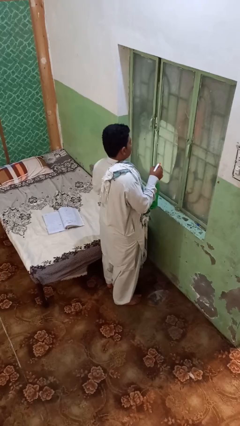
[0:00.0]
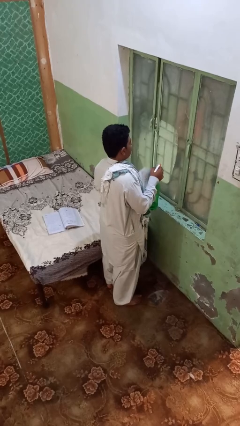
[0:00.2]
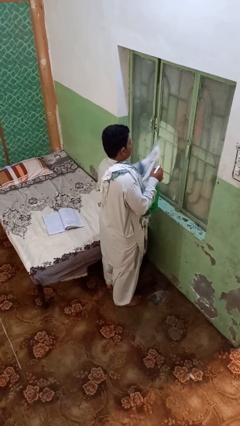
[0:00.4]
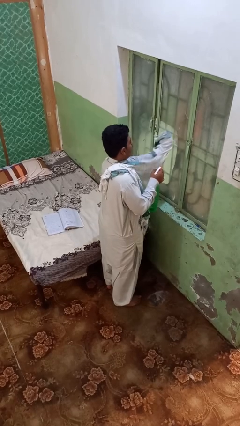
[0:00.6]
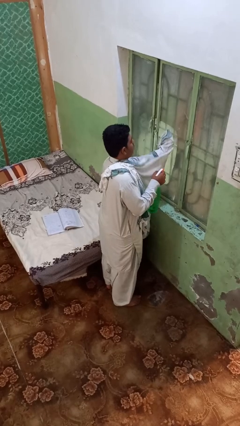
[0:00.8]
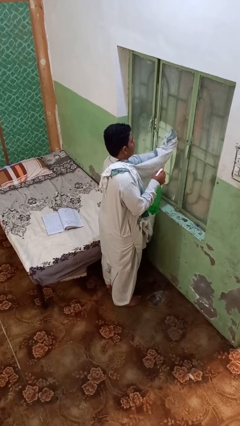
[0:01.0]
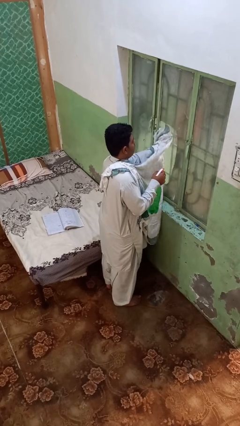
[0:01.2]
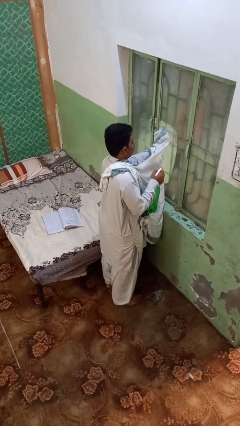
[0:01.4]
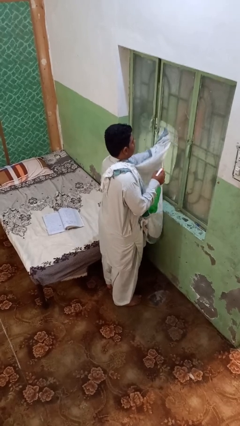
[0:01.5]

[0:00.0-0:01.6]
person washes window

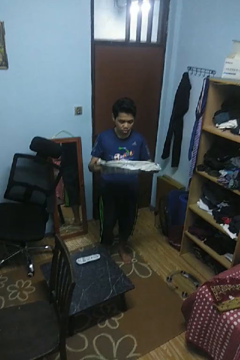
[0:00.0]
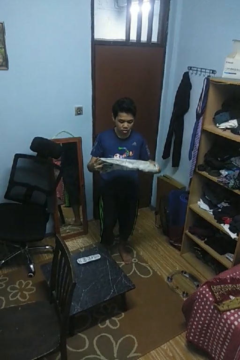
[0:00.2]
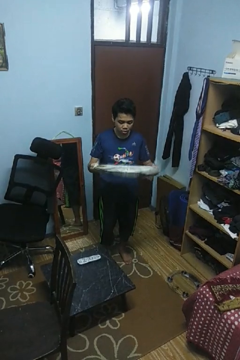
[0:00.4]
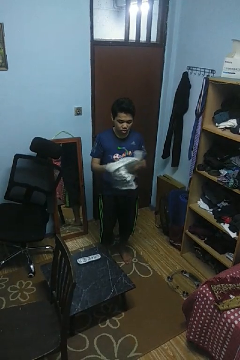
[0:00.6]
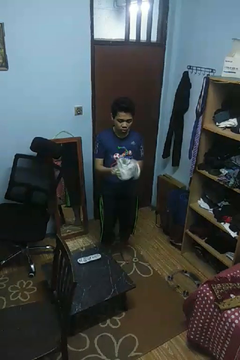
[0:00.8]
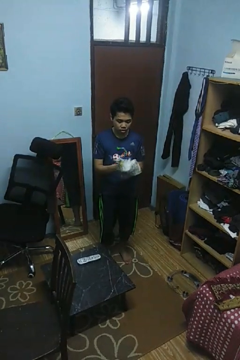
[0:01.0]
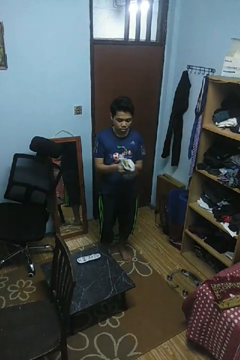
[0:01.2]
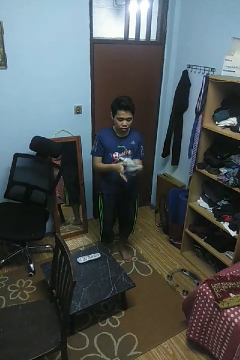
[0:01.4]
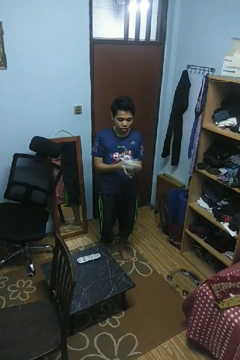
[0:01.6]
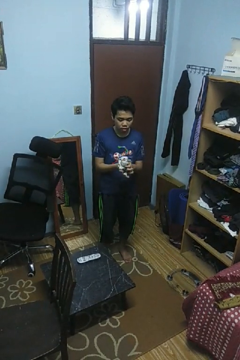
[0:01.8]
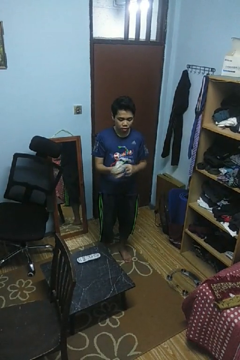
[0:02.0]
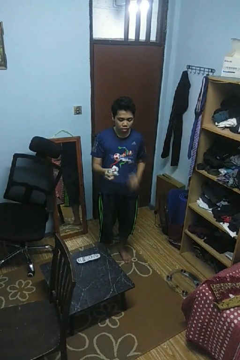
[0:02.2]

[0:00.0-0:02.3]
person crumples paper

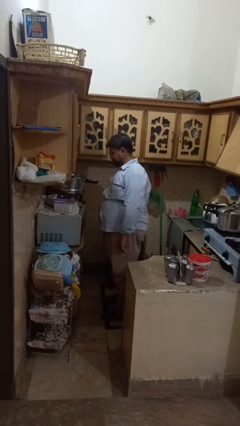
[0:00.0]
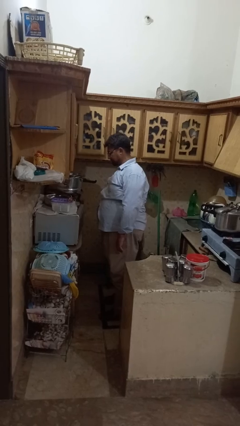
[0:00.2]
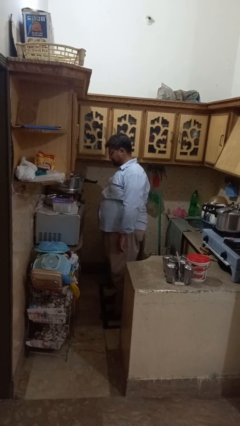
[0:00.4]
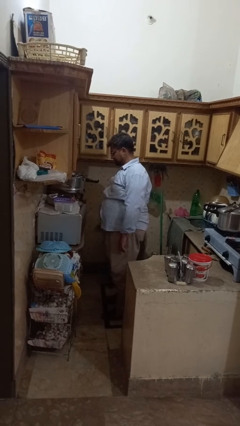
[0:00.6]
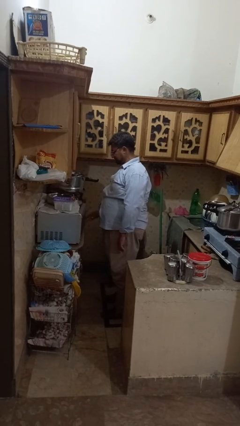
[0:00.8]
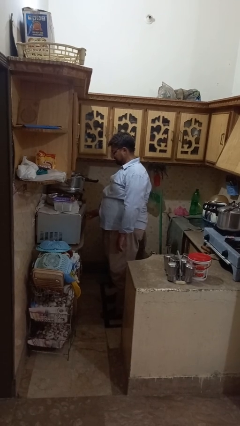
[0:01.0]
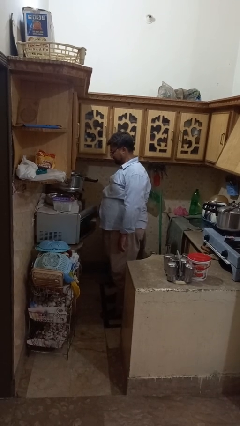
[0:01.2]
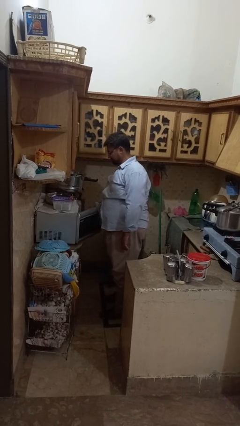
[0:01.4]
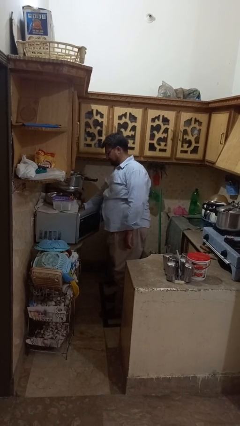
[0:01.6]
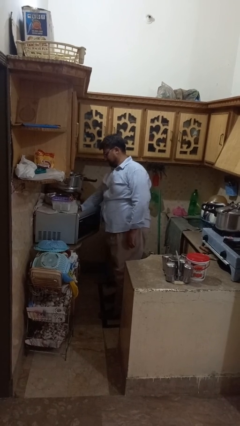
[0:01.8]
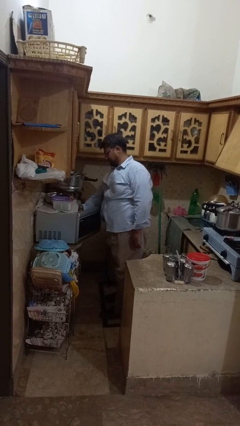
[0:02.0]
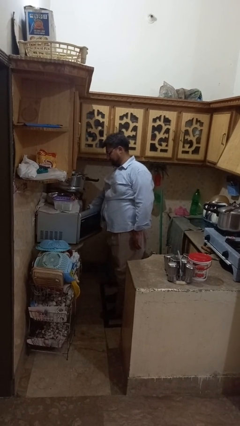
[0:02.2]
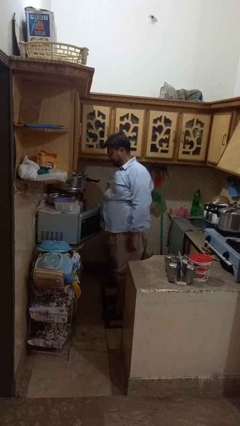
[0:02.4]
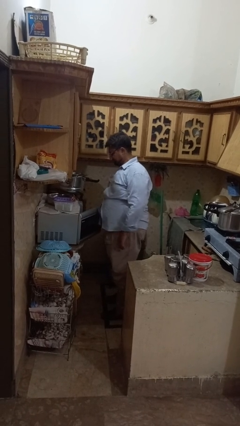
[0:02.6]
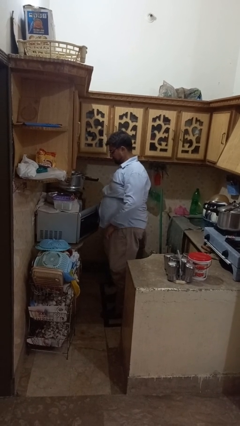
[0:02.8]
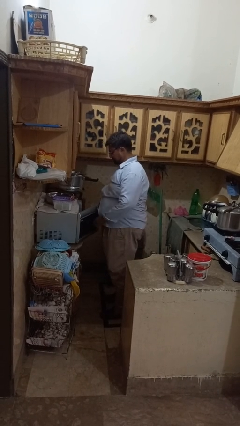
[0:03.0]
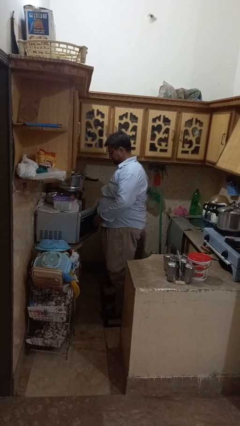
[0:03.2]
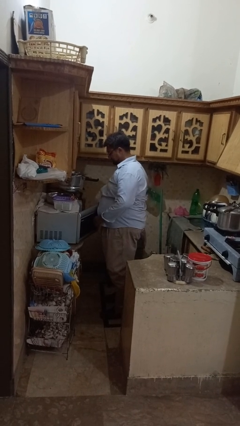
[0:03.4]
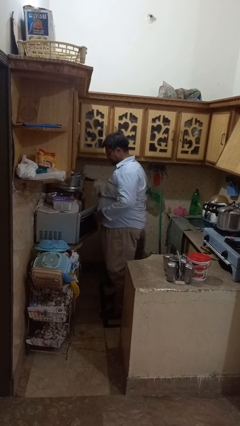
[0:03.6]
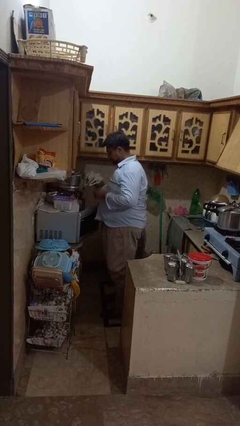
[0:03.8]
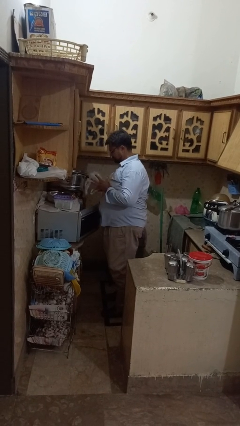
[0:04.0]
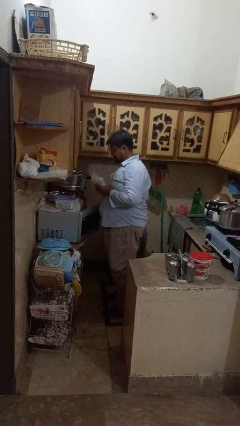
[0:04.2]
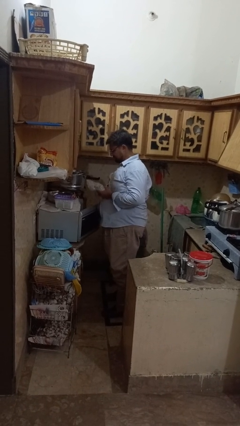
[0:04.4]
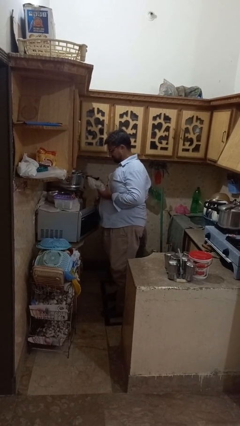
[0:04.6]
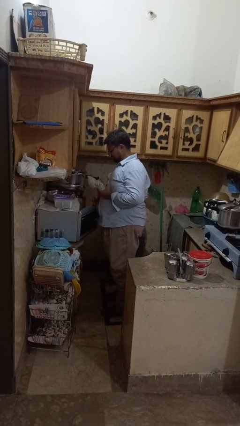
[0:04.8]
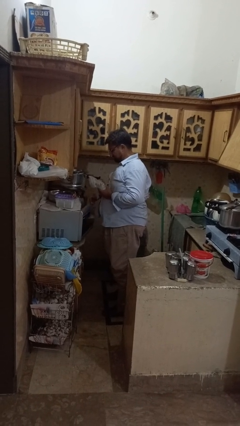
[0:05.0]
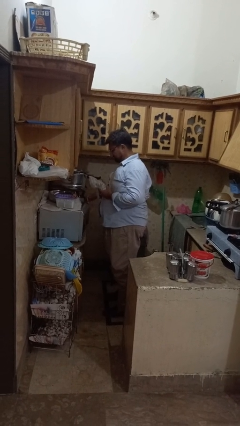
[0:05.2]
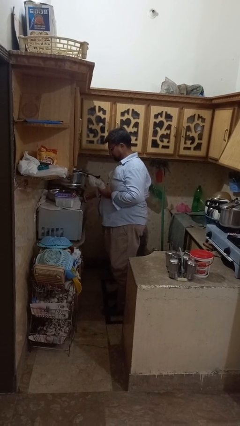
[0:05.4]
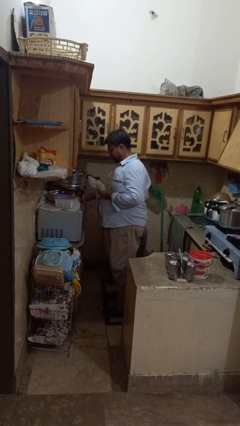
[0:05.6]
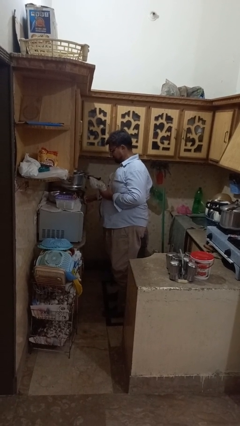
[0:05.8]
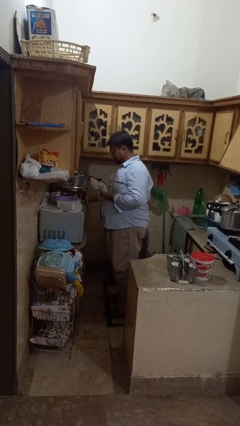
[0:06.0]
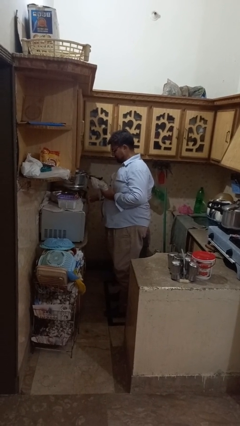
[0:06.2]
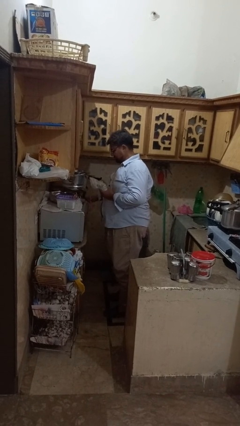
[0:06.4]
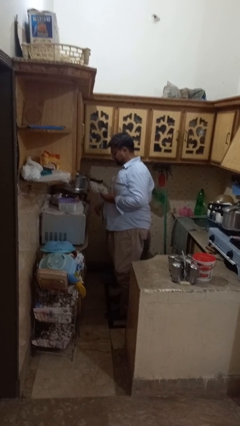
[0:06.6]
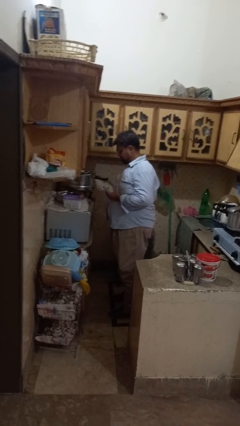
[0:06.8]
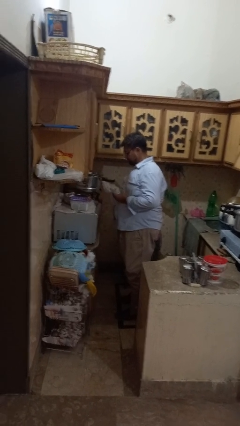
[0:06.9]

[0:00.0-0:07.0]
person takes object from microwave

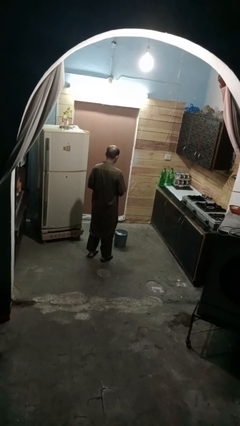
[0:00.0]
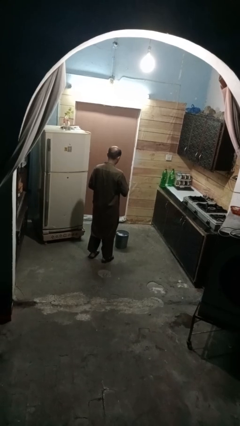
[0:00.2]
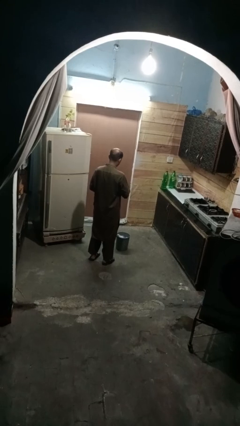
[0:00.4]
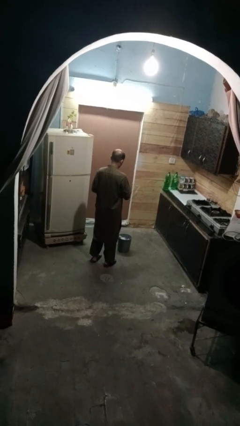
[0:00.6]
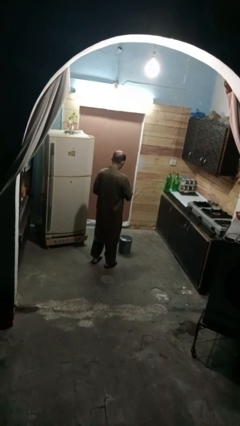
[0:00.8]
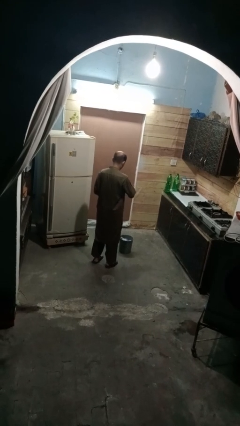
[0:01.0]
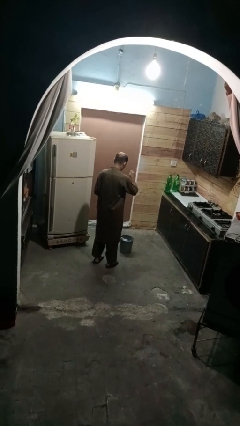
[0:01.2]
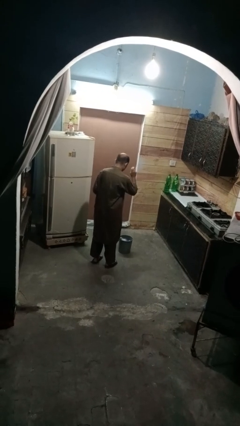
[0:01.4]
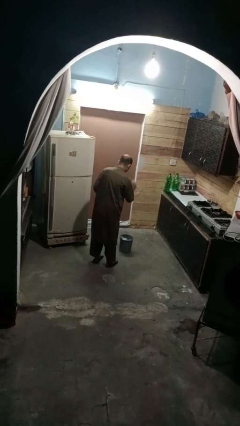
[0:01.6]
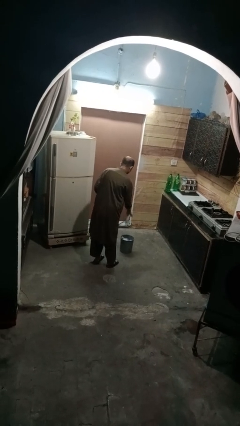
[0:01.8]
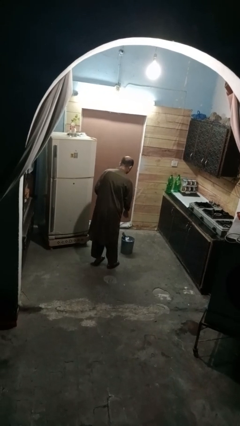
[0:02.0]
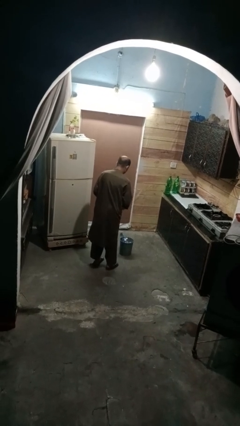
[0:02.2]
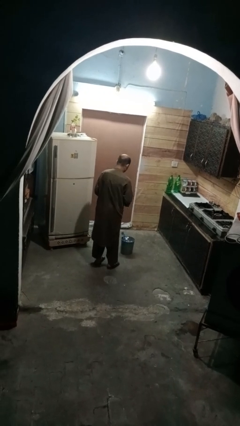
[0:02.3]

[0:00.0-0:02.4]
person discards trash

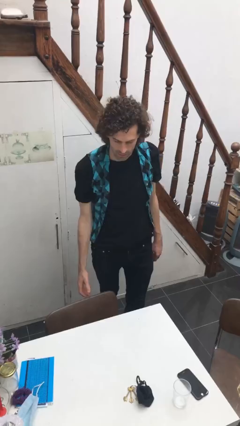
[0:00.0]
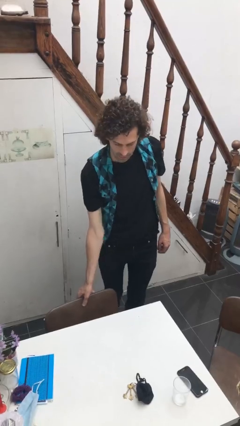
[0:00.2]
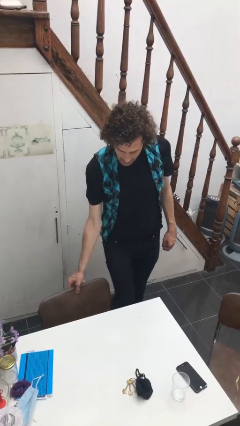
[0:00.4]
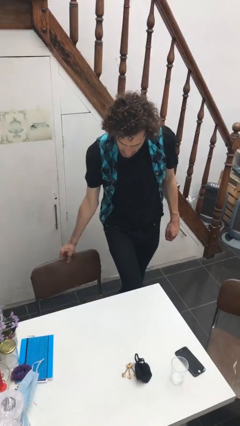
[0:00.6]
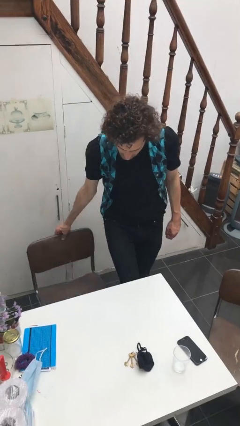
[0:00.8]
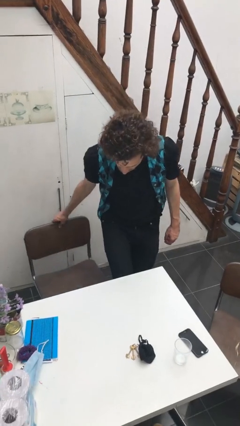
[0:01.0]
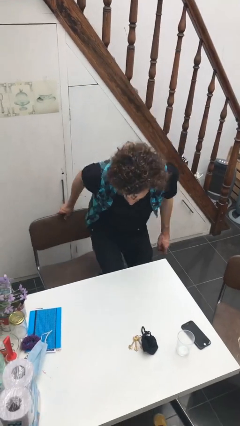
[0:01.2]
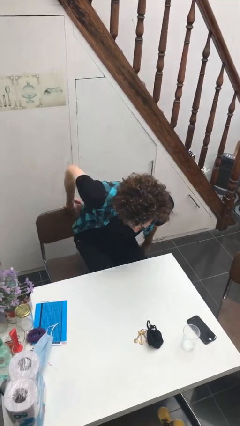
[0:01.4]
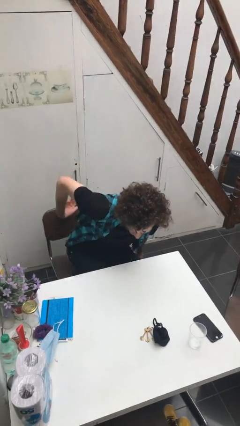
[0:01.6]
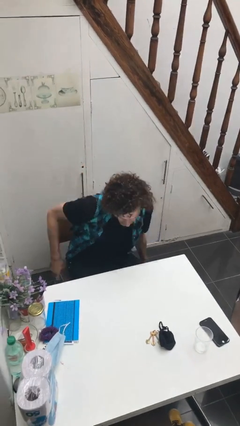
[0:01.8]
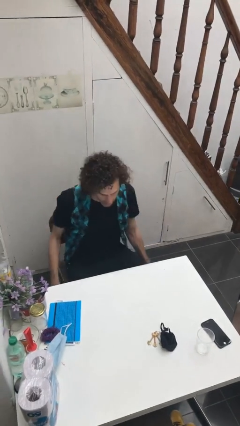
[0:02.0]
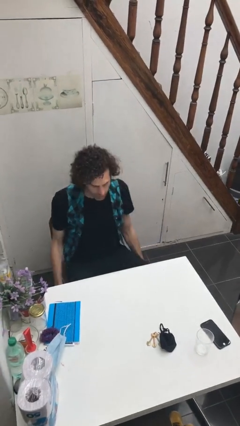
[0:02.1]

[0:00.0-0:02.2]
person sits down

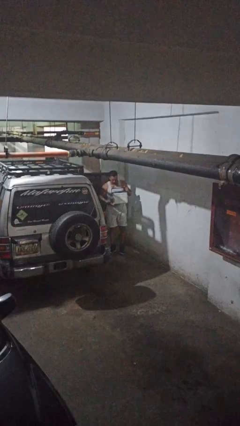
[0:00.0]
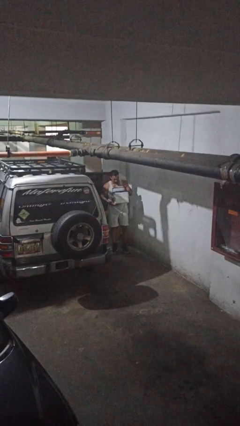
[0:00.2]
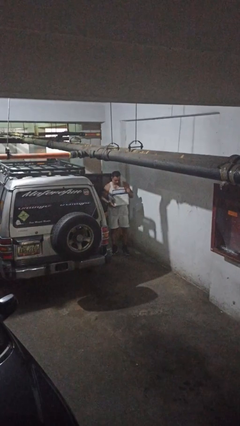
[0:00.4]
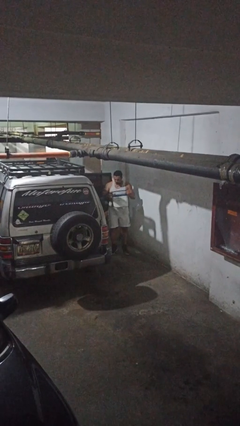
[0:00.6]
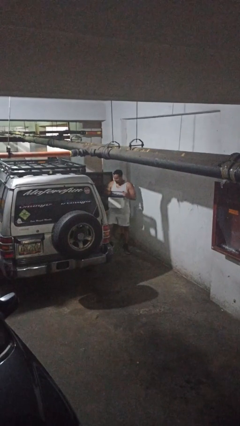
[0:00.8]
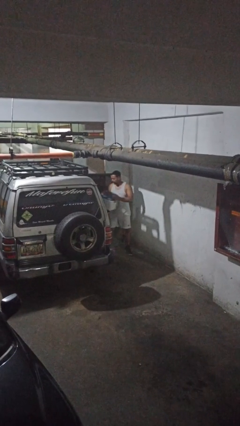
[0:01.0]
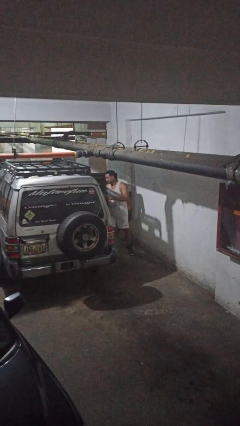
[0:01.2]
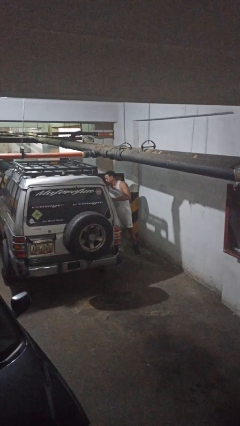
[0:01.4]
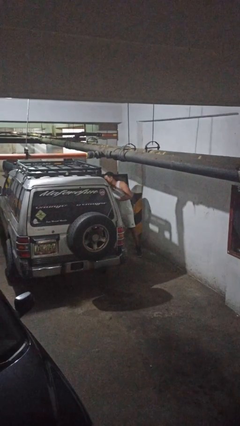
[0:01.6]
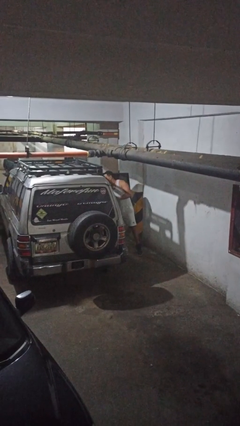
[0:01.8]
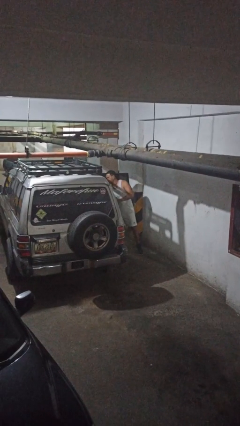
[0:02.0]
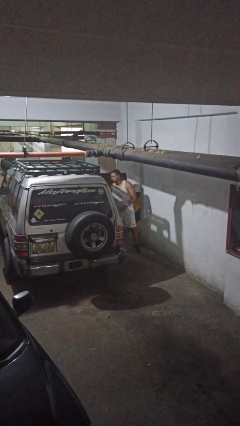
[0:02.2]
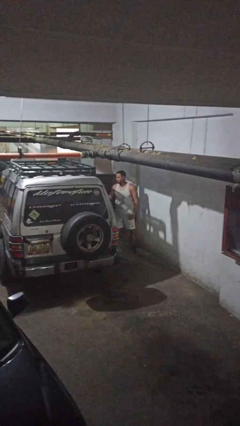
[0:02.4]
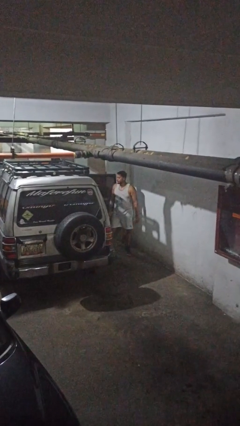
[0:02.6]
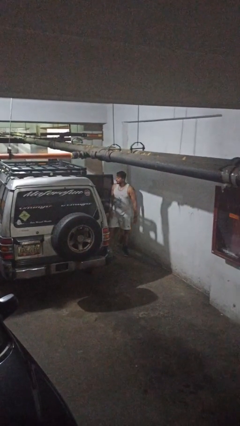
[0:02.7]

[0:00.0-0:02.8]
person loads car
